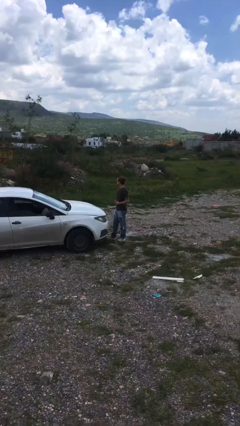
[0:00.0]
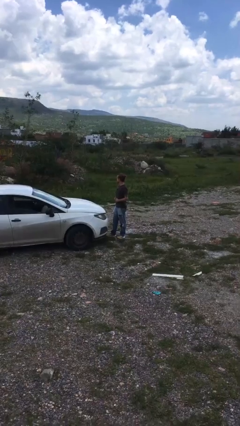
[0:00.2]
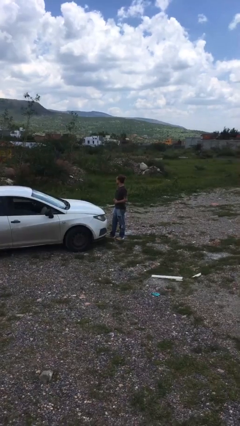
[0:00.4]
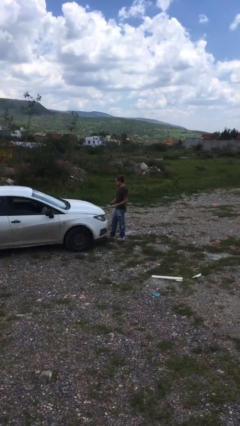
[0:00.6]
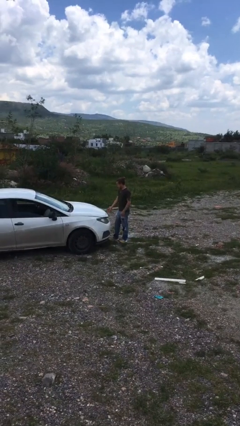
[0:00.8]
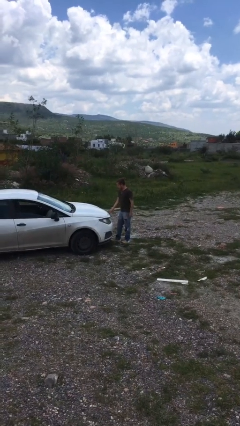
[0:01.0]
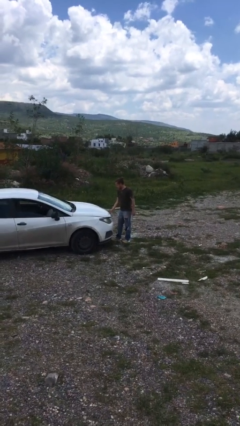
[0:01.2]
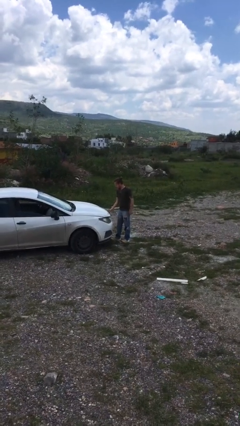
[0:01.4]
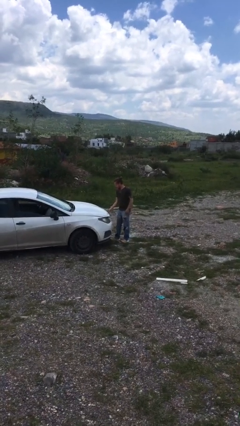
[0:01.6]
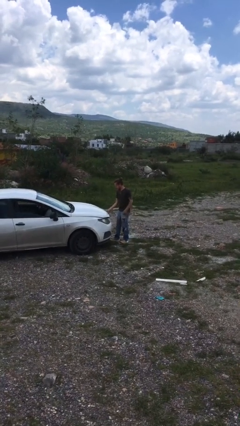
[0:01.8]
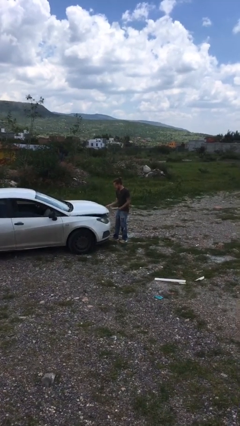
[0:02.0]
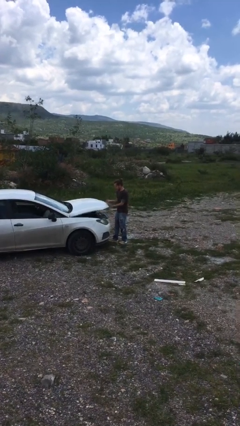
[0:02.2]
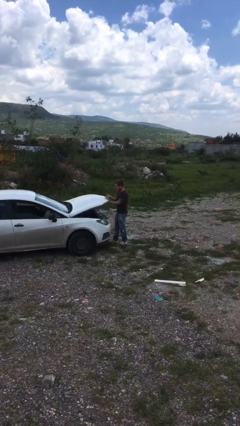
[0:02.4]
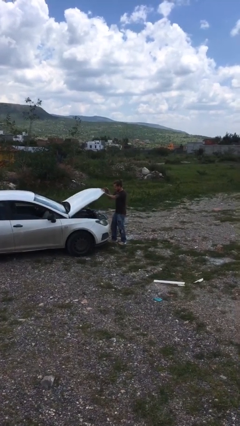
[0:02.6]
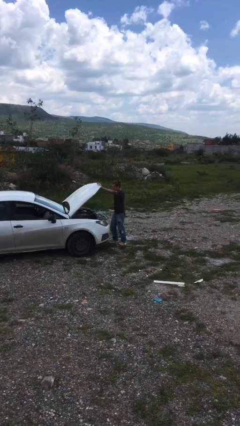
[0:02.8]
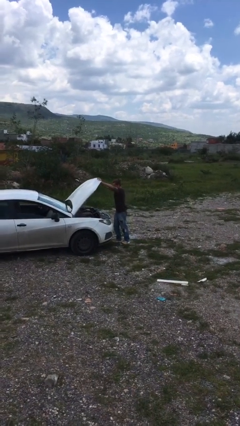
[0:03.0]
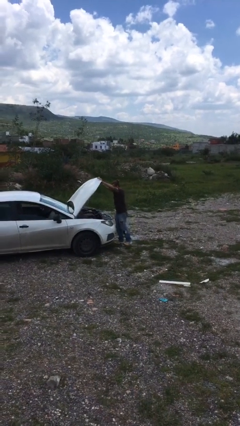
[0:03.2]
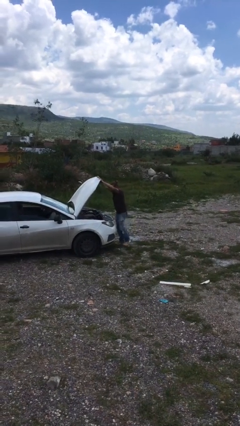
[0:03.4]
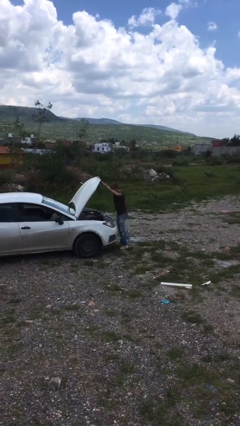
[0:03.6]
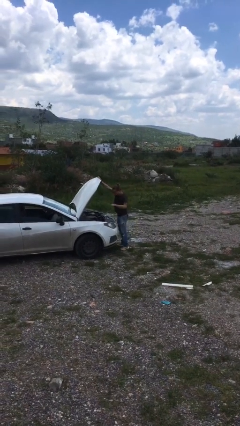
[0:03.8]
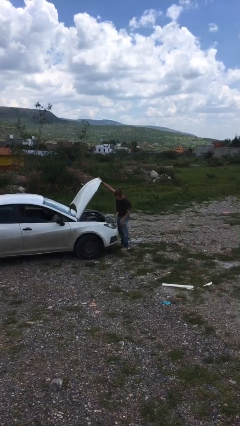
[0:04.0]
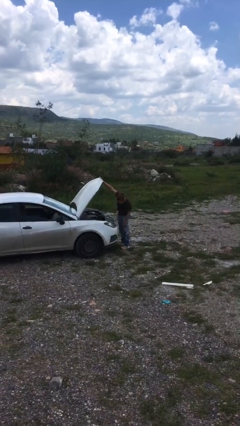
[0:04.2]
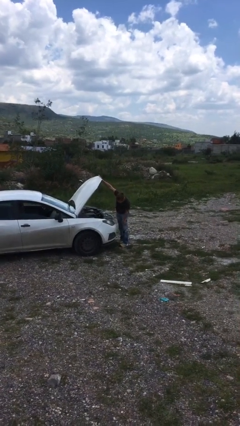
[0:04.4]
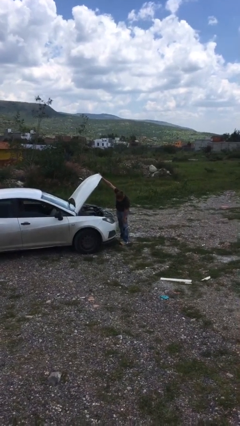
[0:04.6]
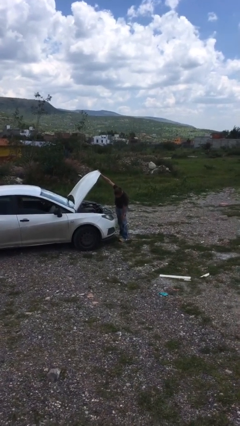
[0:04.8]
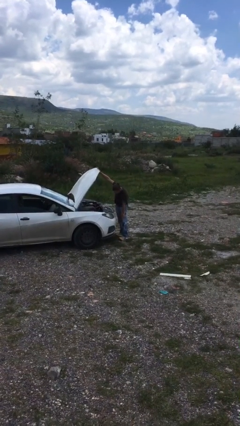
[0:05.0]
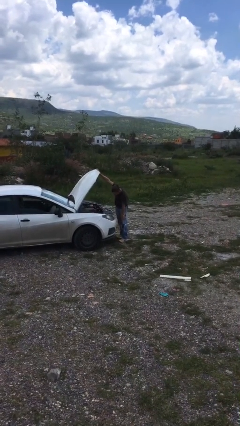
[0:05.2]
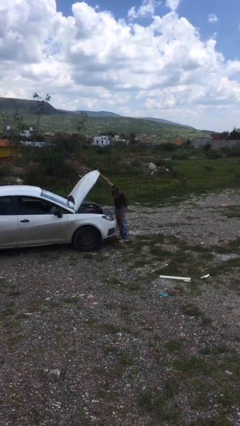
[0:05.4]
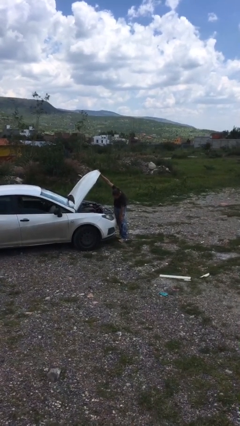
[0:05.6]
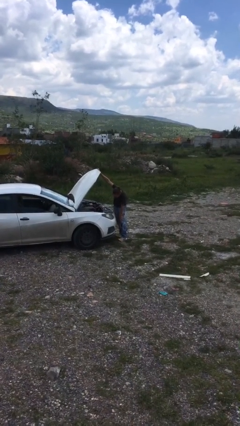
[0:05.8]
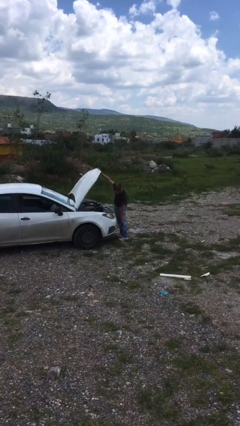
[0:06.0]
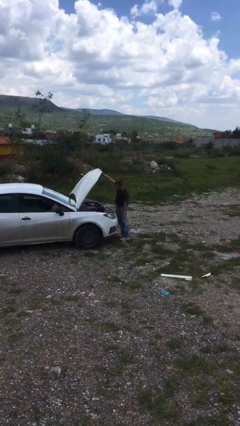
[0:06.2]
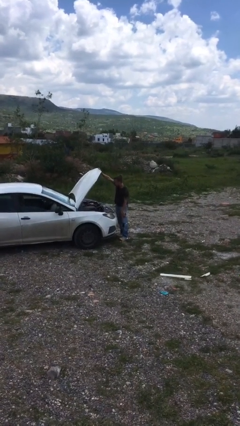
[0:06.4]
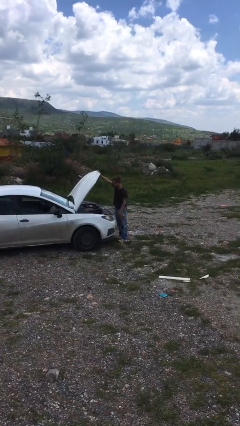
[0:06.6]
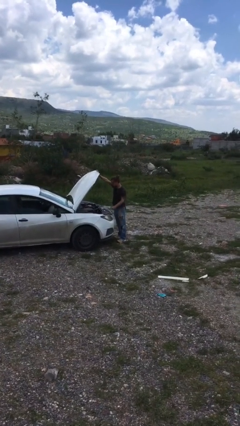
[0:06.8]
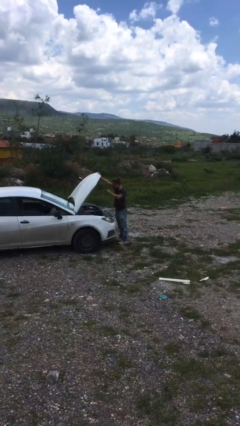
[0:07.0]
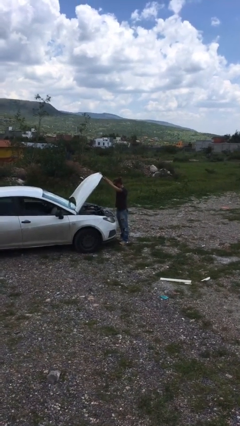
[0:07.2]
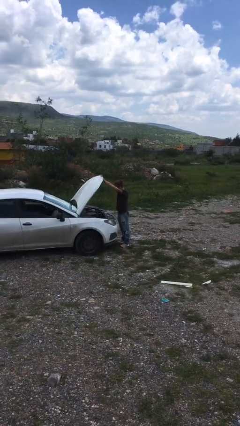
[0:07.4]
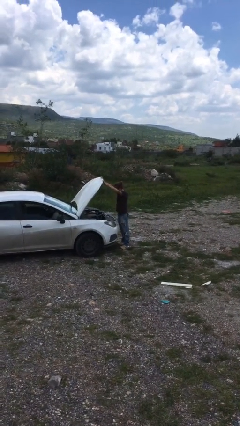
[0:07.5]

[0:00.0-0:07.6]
person opens car hood

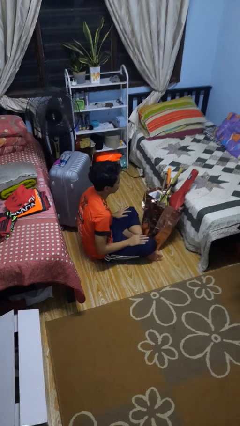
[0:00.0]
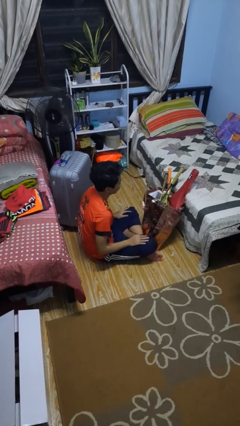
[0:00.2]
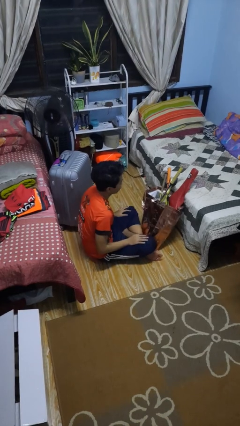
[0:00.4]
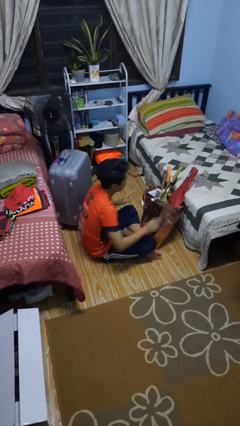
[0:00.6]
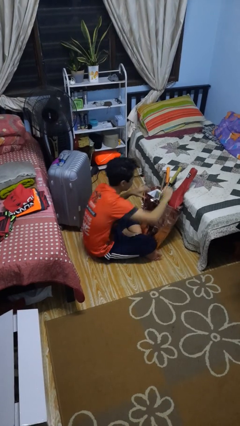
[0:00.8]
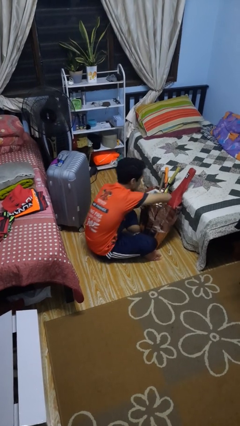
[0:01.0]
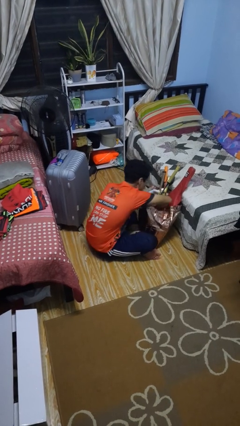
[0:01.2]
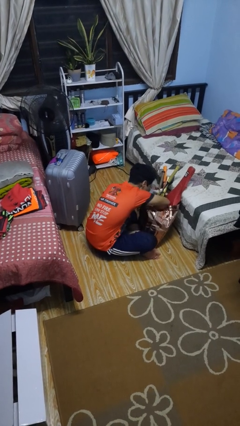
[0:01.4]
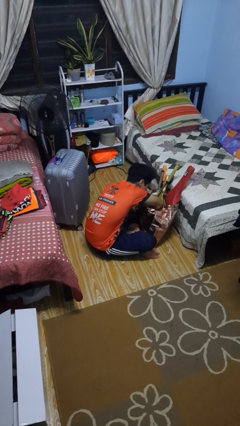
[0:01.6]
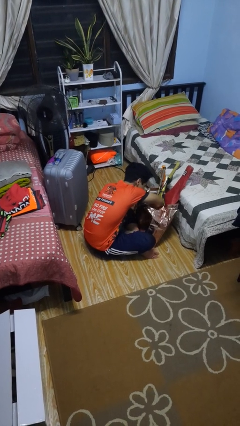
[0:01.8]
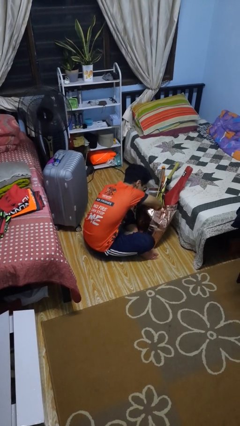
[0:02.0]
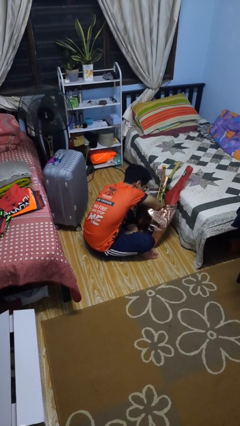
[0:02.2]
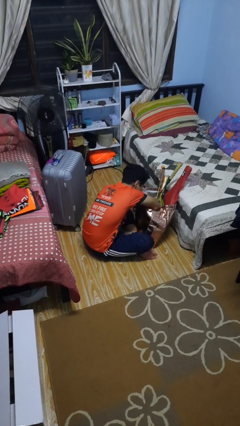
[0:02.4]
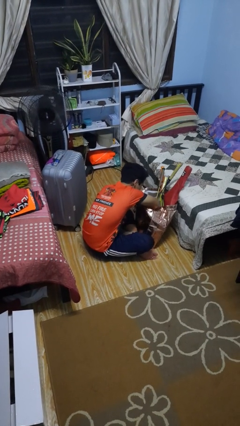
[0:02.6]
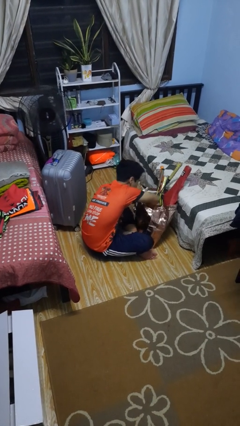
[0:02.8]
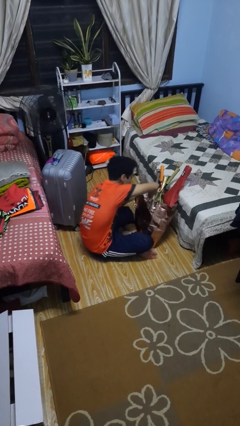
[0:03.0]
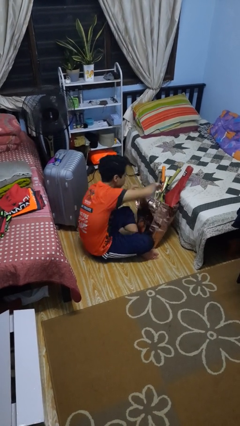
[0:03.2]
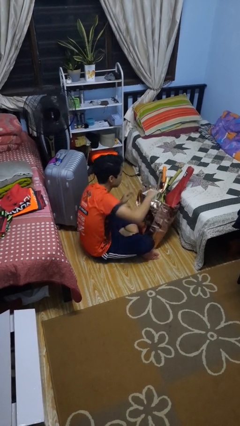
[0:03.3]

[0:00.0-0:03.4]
person searches in bag

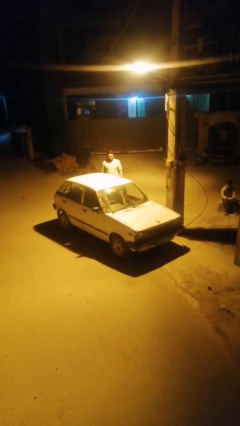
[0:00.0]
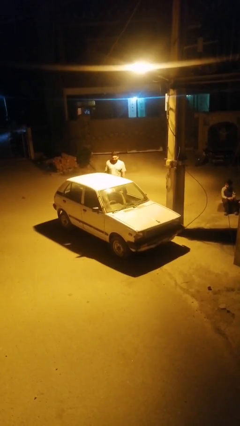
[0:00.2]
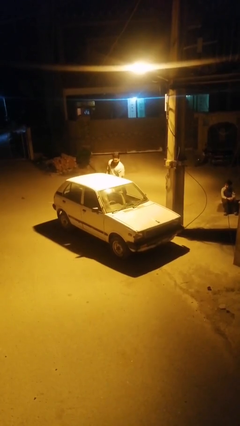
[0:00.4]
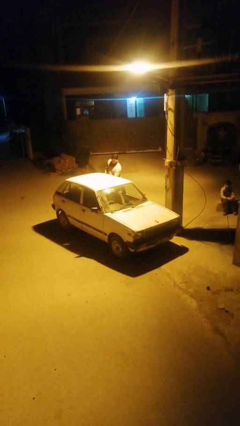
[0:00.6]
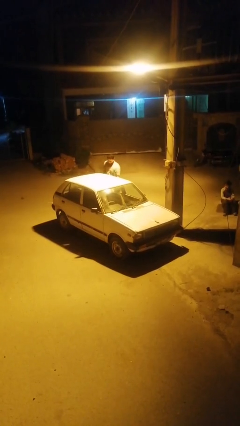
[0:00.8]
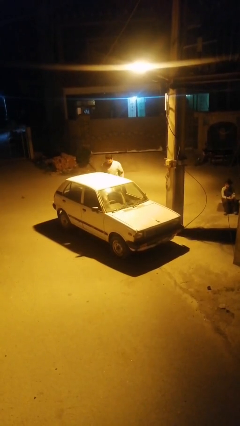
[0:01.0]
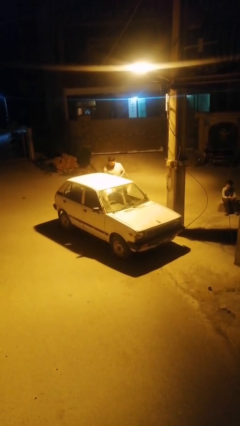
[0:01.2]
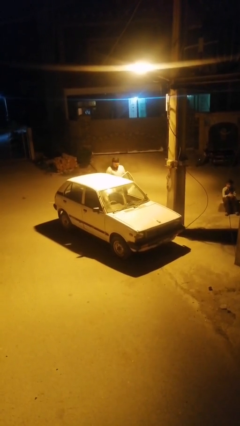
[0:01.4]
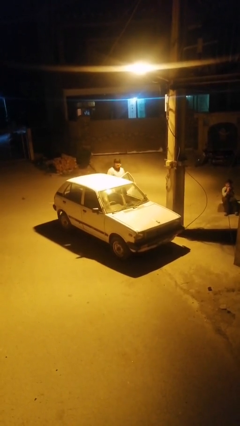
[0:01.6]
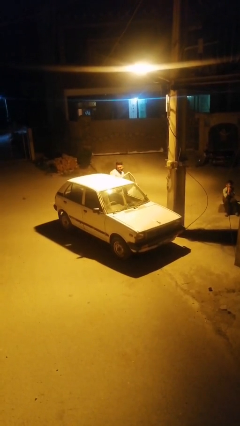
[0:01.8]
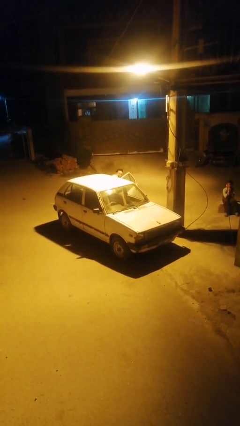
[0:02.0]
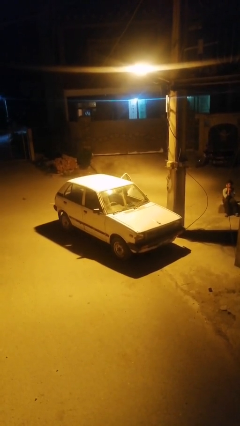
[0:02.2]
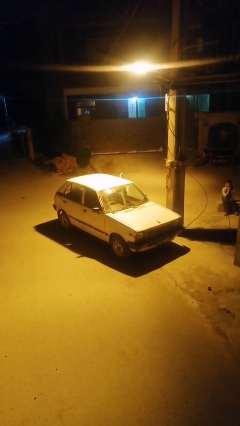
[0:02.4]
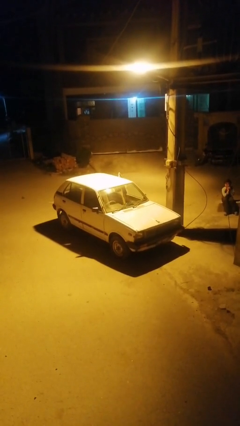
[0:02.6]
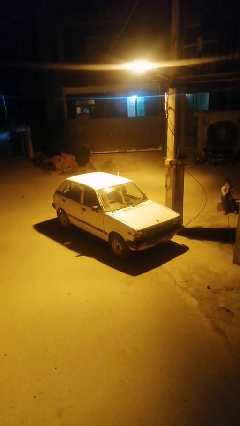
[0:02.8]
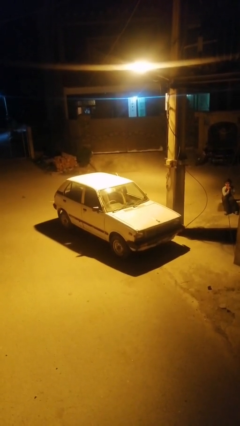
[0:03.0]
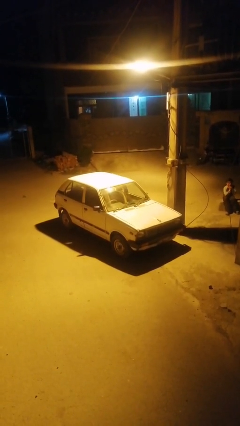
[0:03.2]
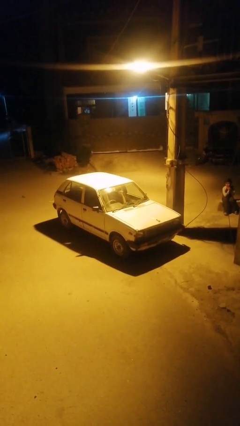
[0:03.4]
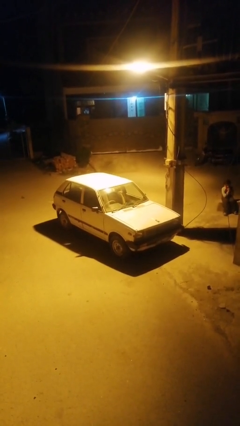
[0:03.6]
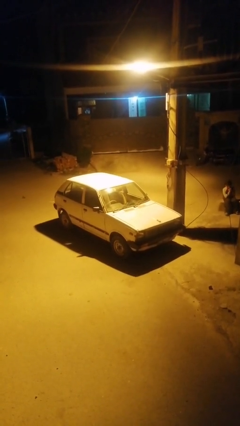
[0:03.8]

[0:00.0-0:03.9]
car picks up person

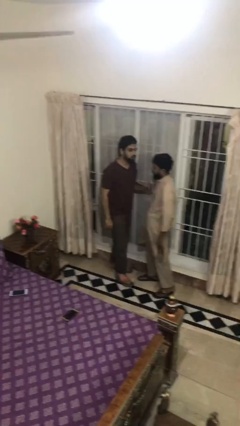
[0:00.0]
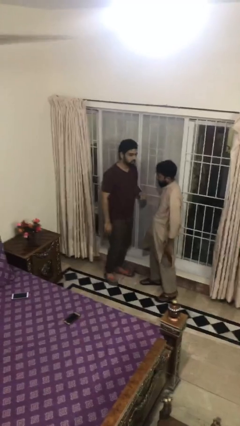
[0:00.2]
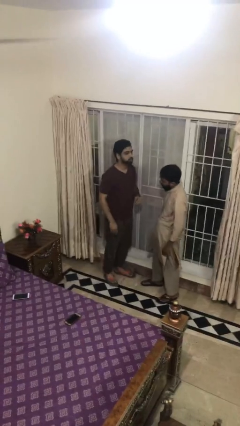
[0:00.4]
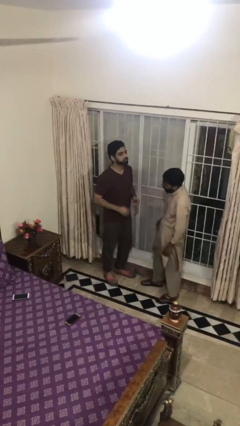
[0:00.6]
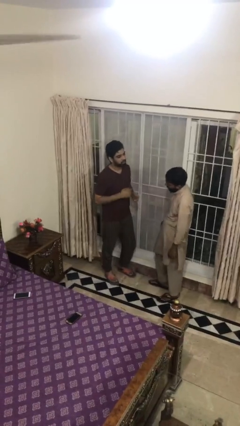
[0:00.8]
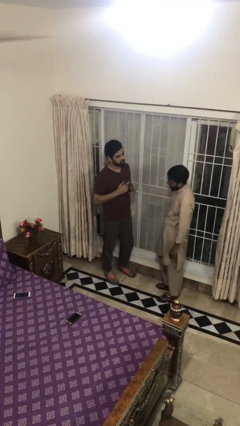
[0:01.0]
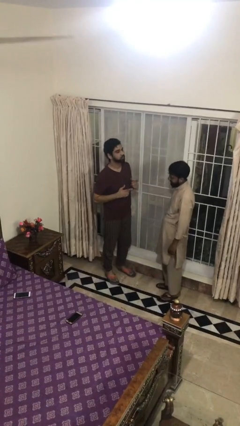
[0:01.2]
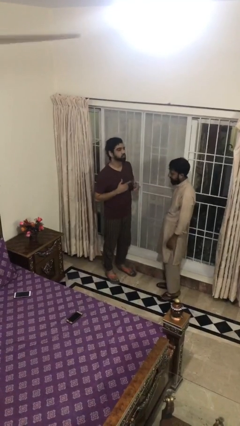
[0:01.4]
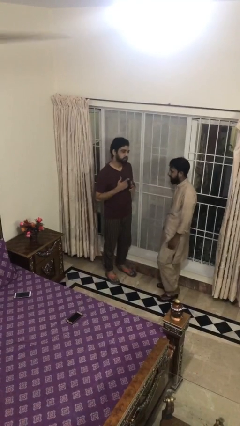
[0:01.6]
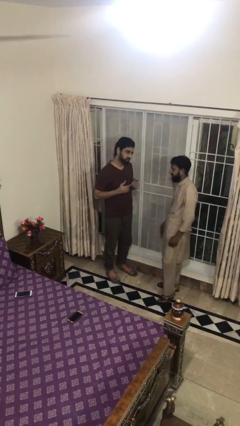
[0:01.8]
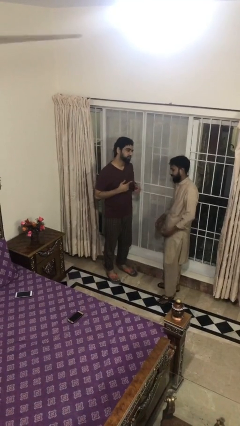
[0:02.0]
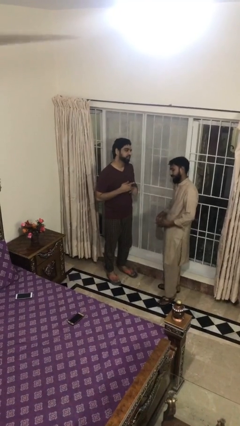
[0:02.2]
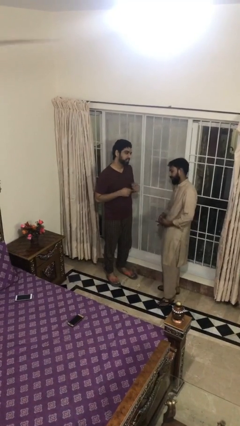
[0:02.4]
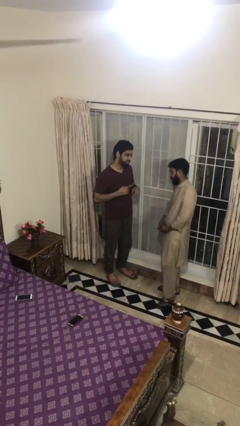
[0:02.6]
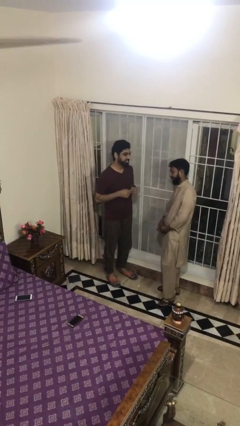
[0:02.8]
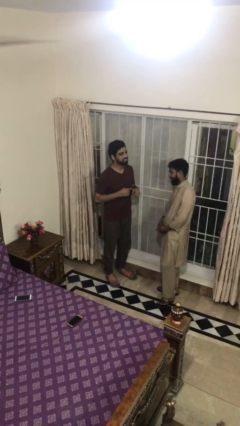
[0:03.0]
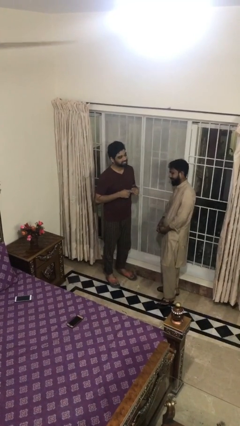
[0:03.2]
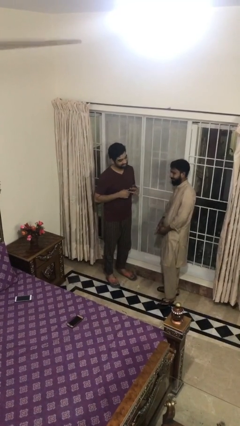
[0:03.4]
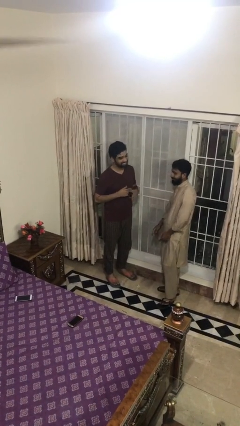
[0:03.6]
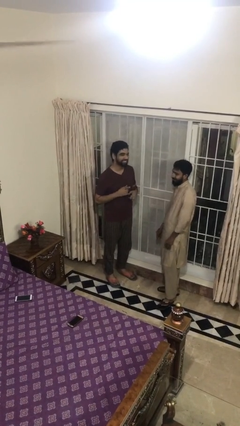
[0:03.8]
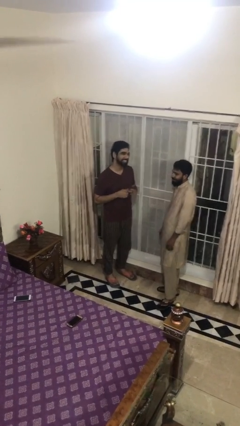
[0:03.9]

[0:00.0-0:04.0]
person talks to person
